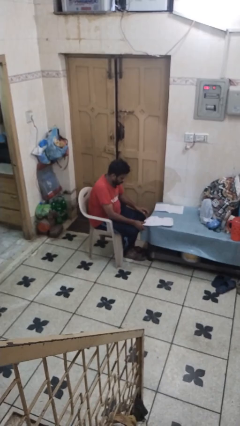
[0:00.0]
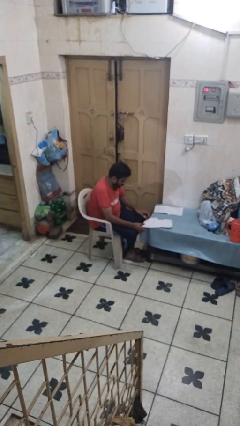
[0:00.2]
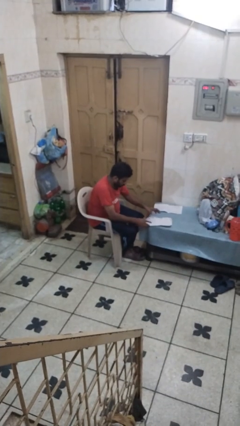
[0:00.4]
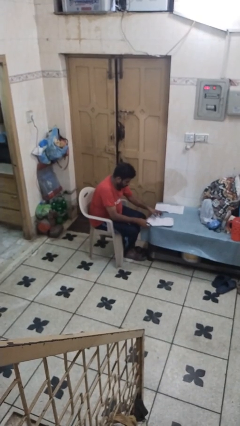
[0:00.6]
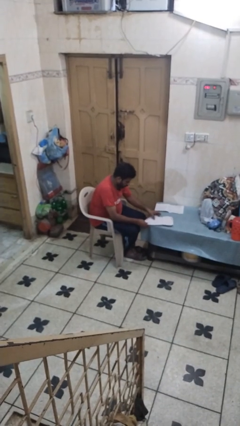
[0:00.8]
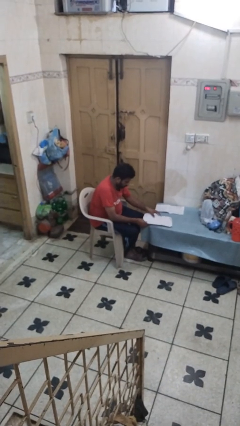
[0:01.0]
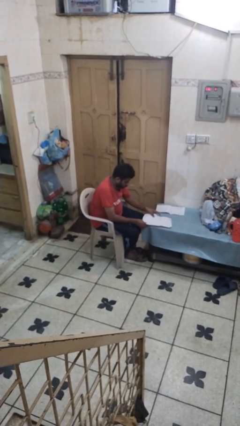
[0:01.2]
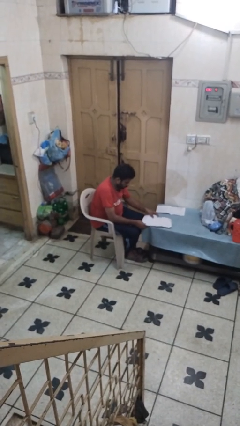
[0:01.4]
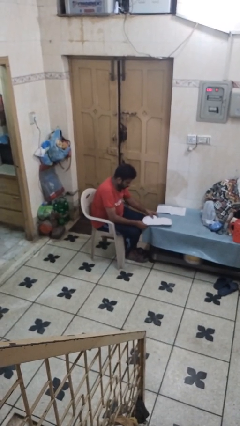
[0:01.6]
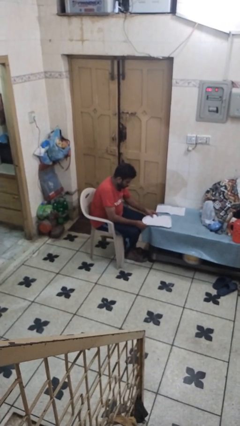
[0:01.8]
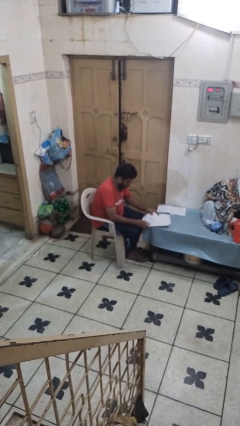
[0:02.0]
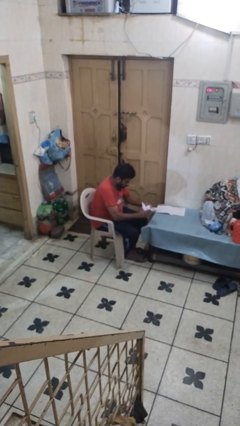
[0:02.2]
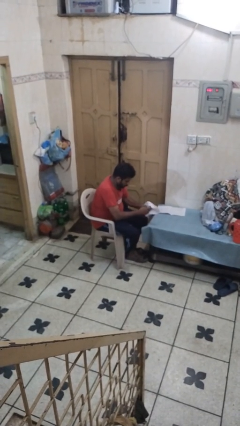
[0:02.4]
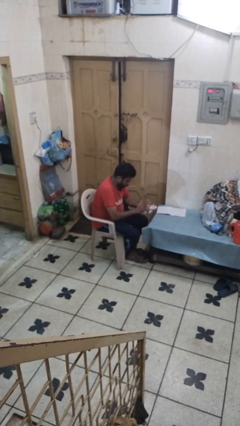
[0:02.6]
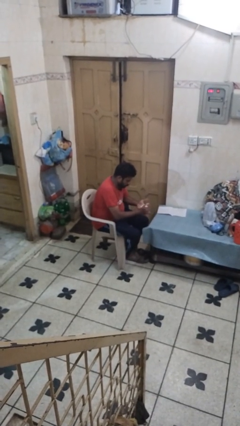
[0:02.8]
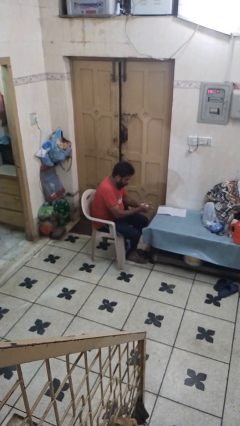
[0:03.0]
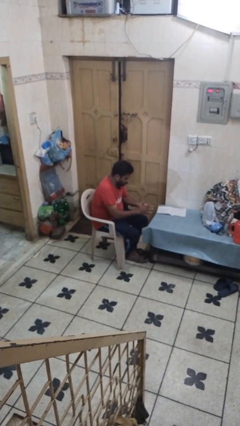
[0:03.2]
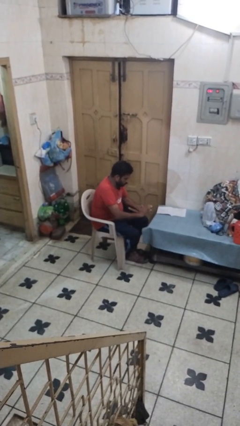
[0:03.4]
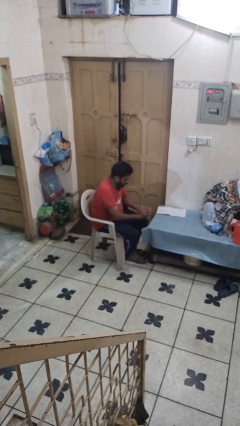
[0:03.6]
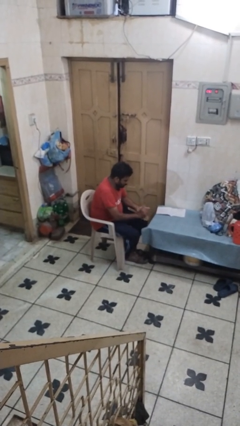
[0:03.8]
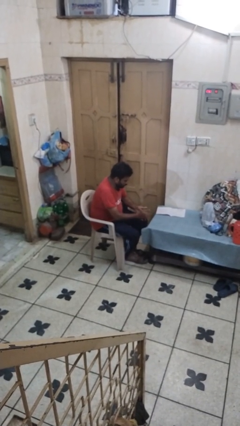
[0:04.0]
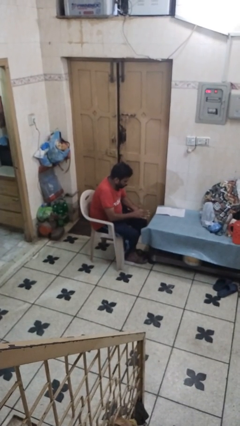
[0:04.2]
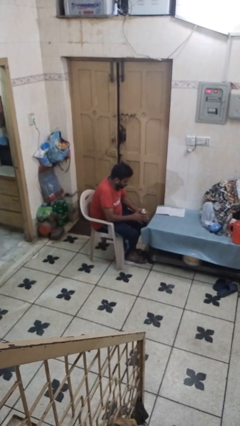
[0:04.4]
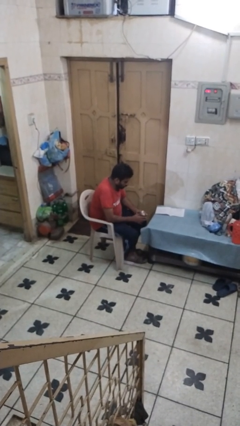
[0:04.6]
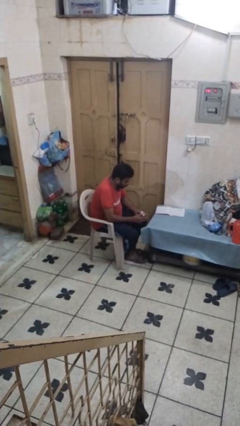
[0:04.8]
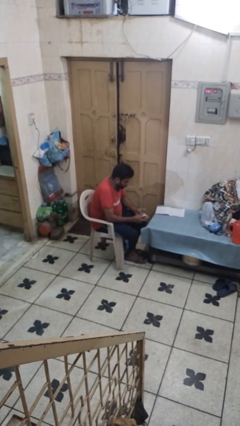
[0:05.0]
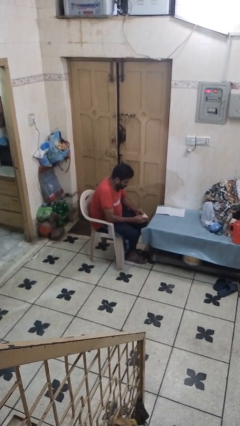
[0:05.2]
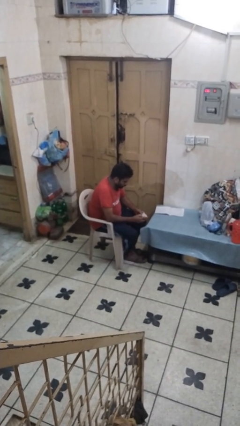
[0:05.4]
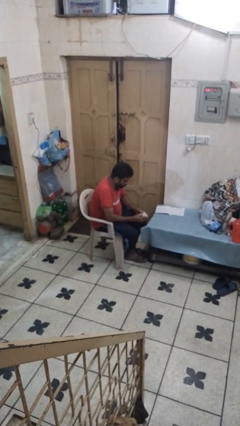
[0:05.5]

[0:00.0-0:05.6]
person crumples paper

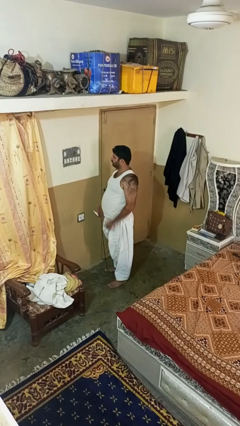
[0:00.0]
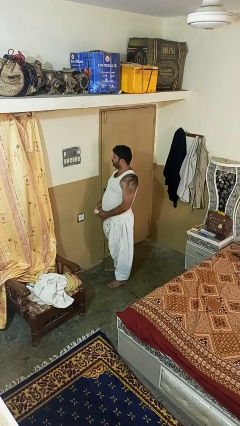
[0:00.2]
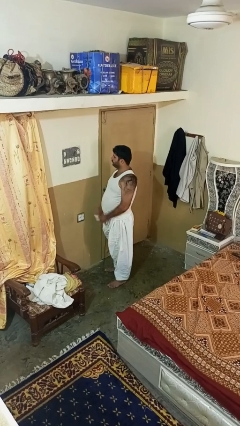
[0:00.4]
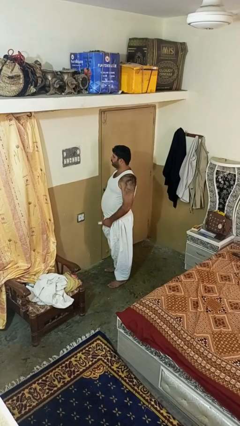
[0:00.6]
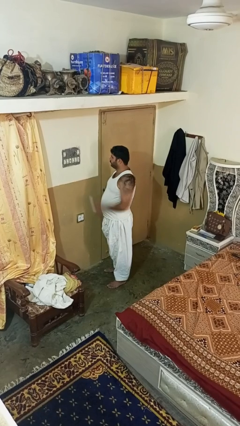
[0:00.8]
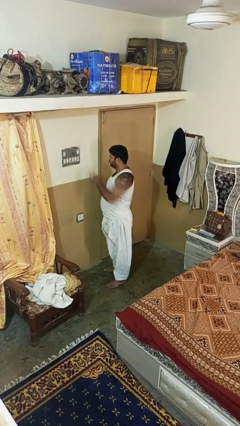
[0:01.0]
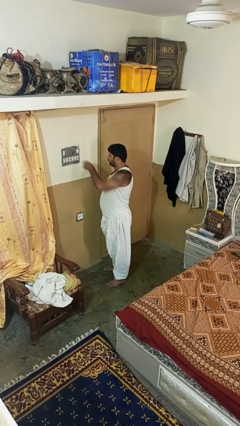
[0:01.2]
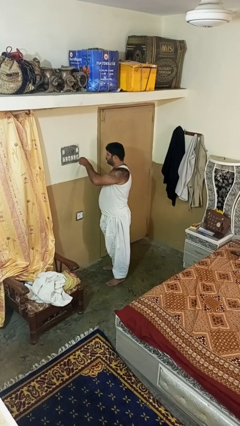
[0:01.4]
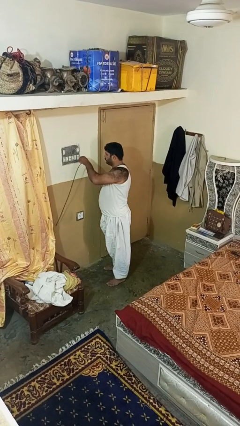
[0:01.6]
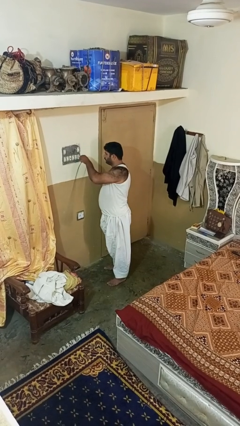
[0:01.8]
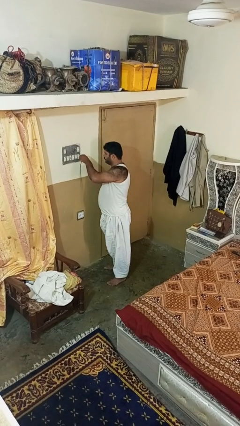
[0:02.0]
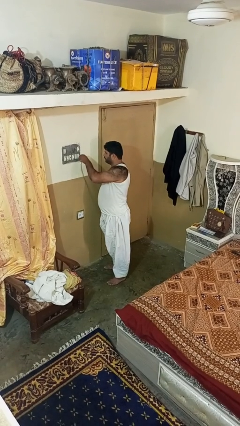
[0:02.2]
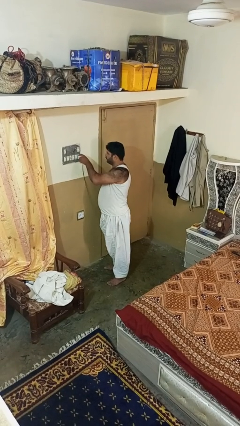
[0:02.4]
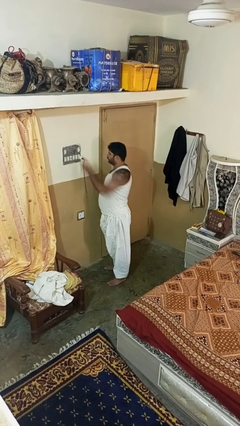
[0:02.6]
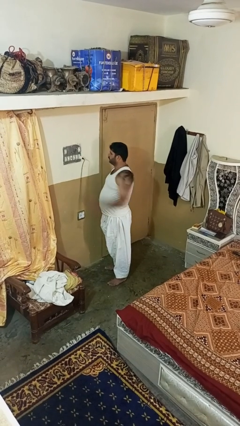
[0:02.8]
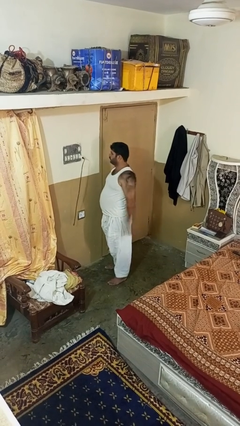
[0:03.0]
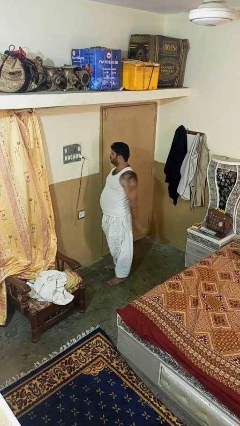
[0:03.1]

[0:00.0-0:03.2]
person plugs into electrical socket

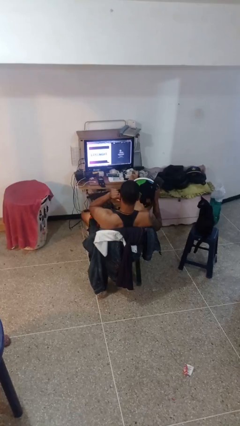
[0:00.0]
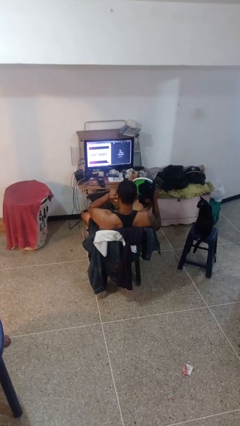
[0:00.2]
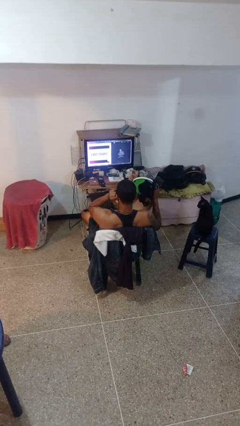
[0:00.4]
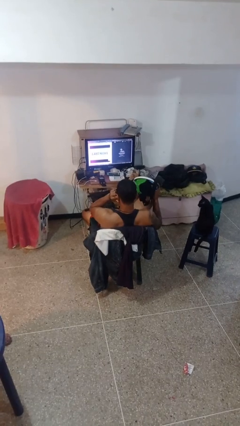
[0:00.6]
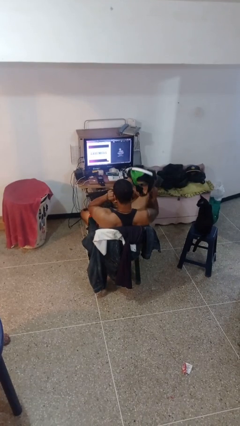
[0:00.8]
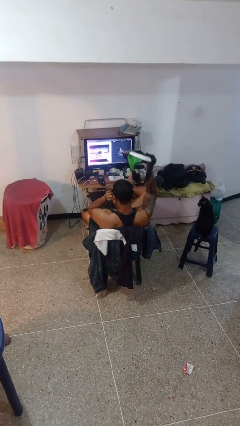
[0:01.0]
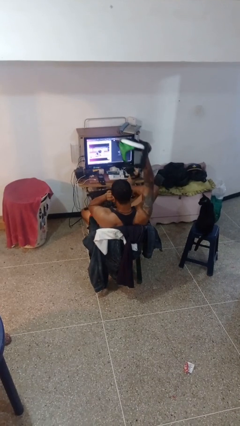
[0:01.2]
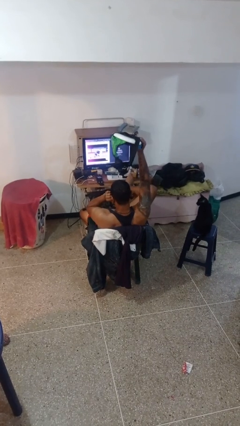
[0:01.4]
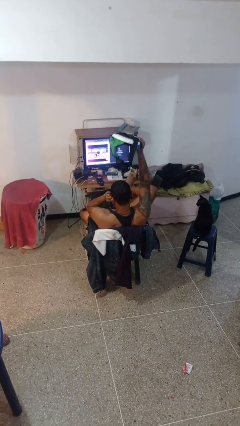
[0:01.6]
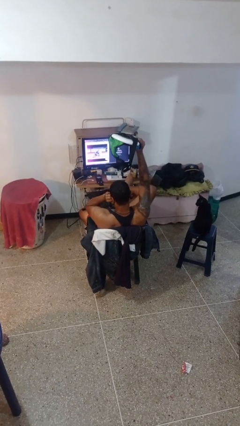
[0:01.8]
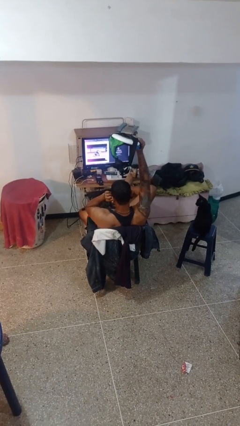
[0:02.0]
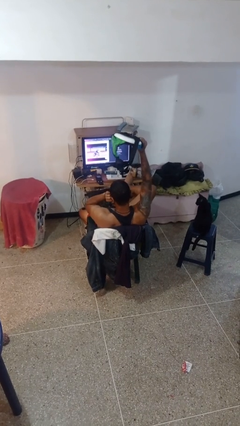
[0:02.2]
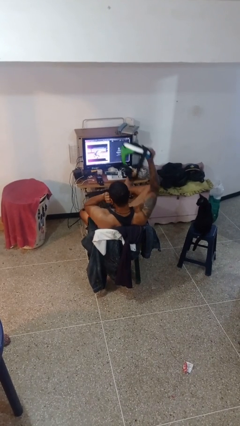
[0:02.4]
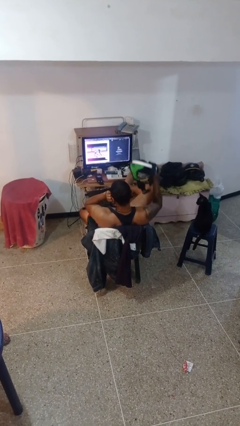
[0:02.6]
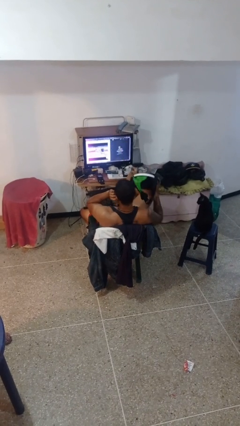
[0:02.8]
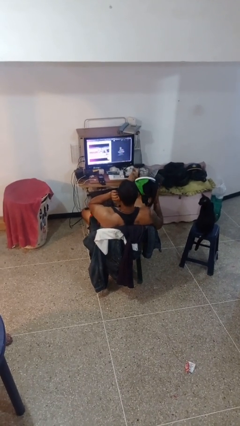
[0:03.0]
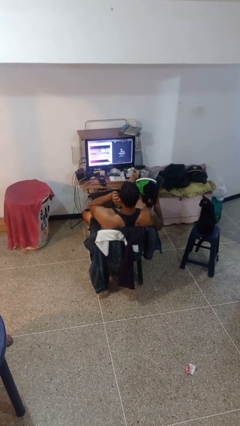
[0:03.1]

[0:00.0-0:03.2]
person holds object above head

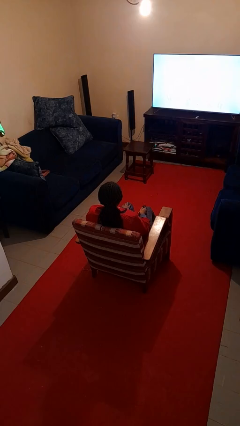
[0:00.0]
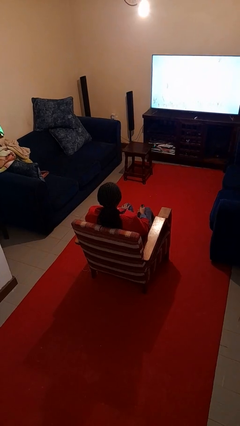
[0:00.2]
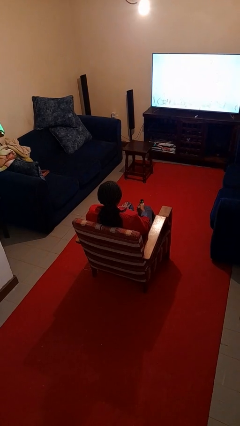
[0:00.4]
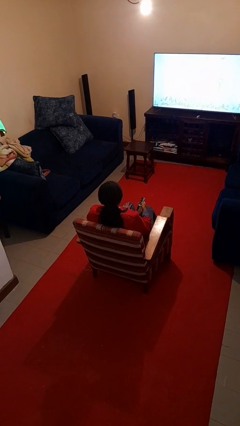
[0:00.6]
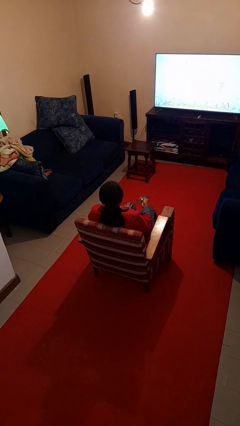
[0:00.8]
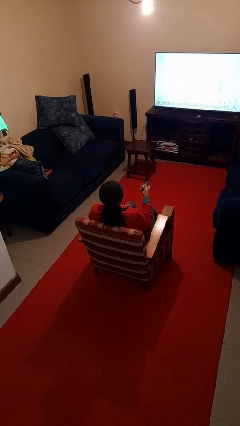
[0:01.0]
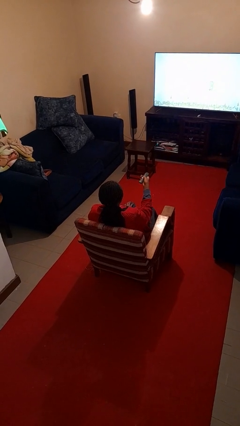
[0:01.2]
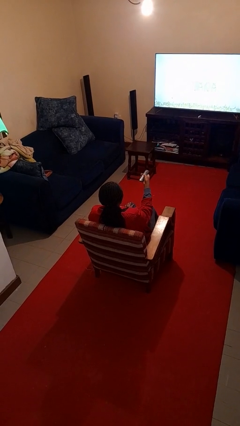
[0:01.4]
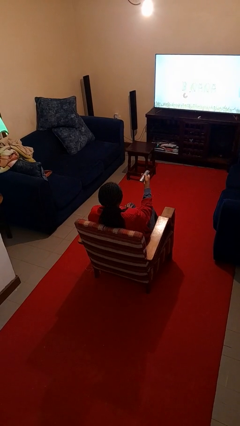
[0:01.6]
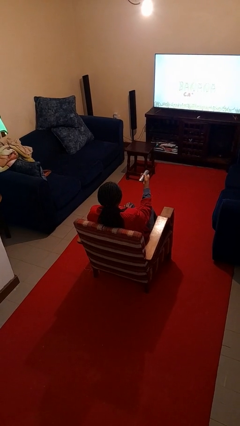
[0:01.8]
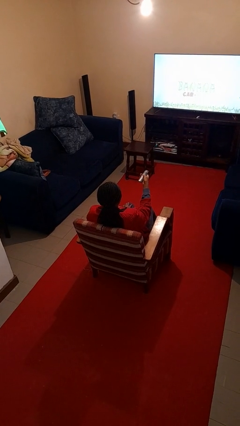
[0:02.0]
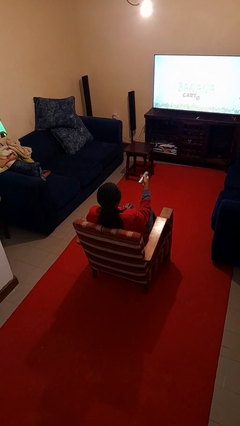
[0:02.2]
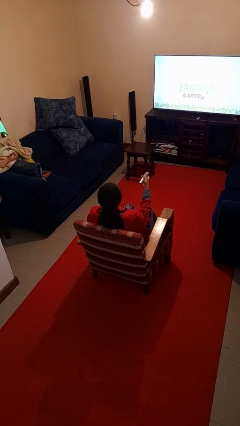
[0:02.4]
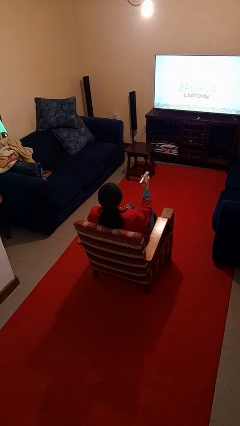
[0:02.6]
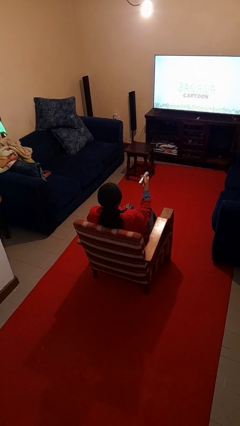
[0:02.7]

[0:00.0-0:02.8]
person uses television remote

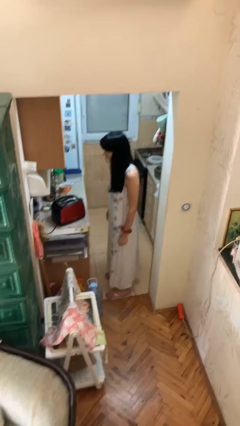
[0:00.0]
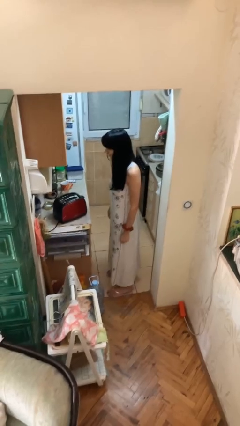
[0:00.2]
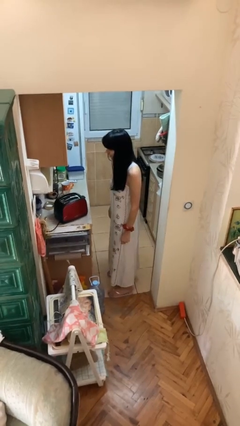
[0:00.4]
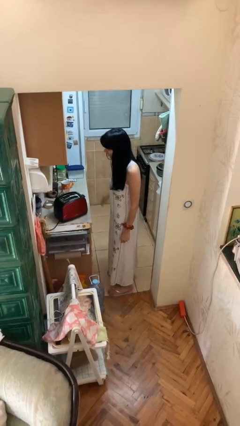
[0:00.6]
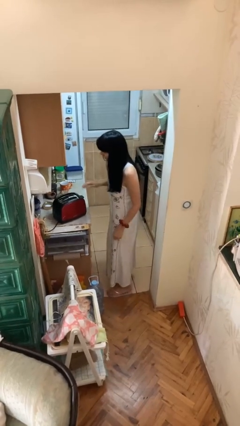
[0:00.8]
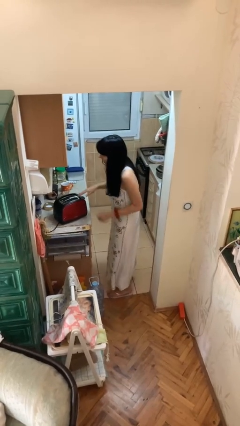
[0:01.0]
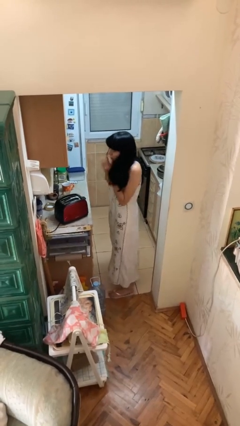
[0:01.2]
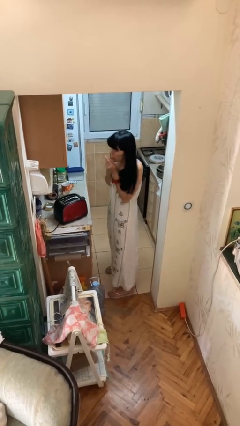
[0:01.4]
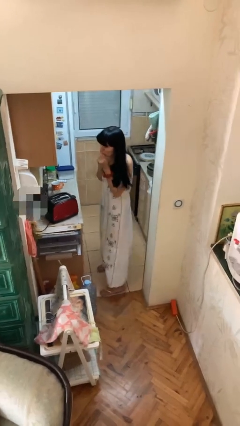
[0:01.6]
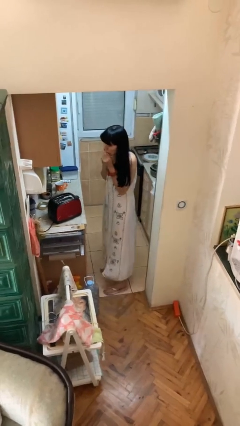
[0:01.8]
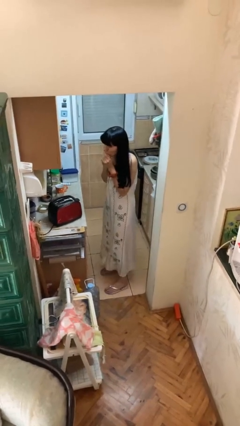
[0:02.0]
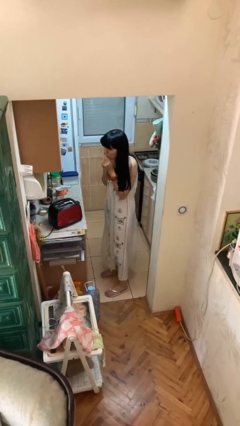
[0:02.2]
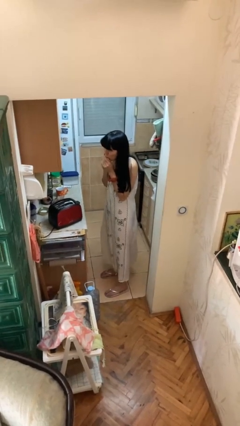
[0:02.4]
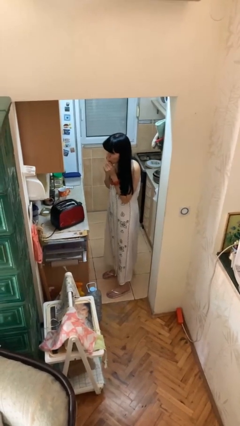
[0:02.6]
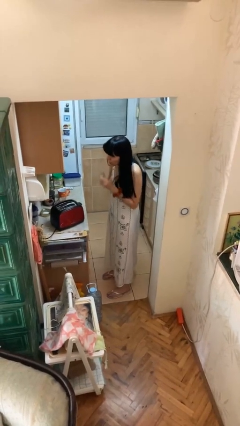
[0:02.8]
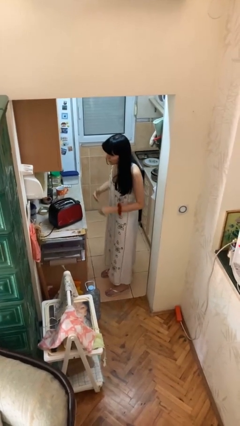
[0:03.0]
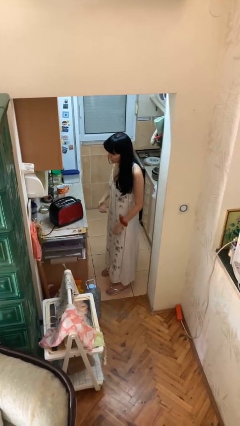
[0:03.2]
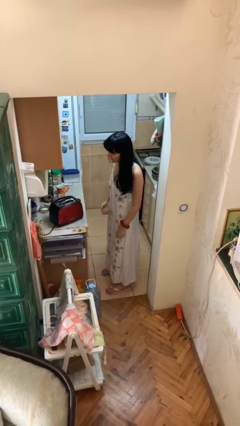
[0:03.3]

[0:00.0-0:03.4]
person burns hand
